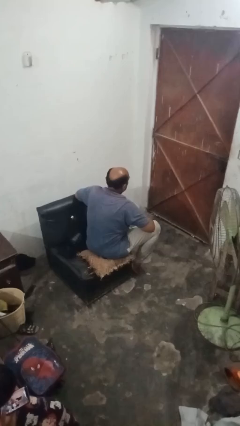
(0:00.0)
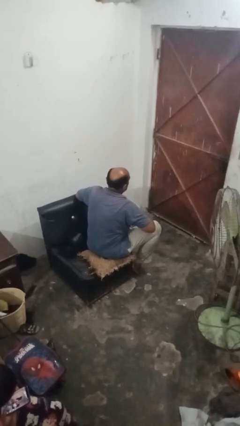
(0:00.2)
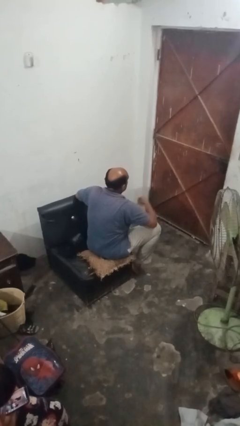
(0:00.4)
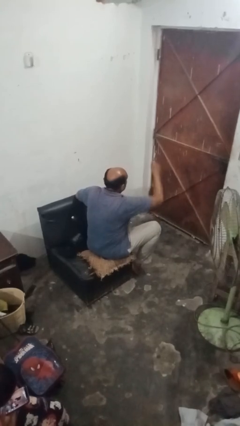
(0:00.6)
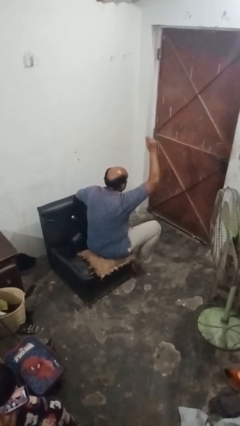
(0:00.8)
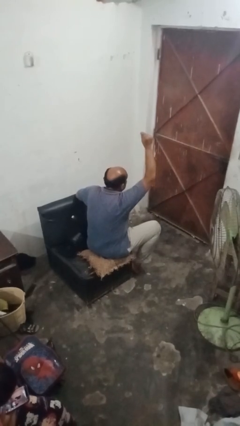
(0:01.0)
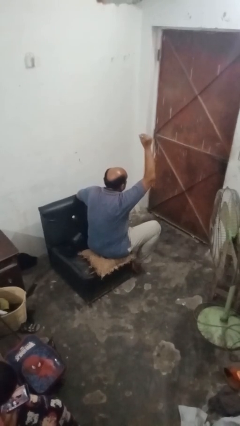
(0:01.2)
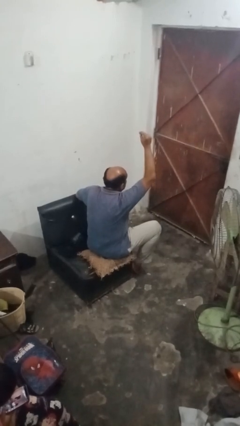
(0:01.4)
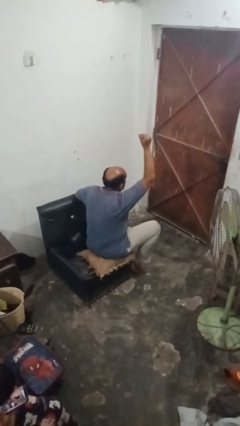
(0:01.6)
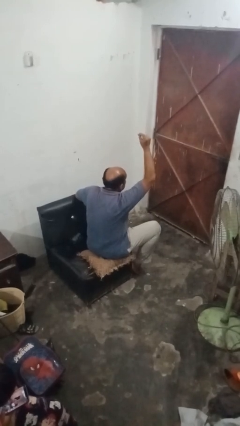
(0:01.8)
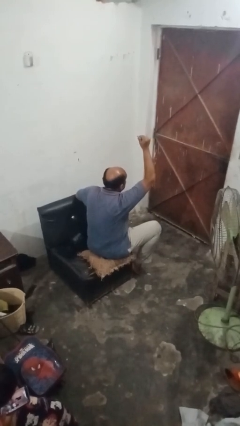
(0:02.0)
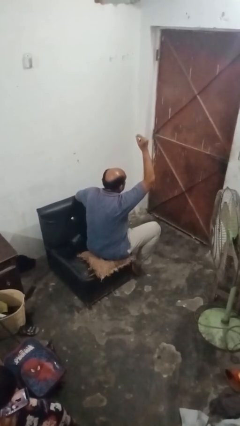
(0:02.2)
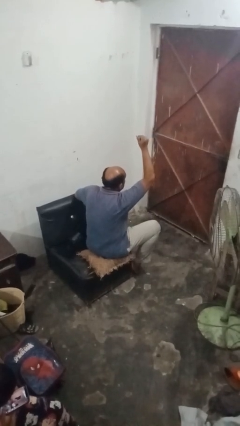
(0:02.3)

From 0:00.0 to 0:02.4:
person snaps fingers

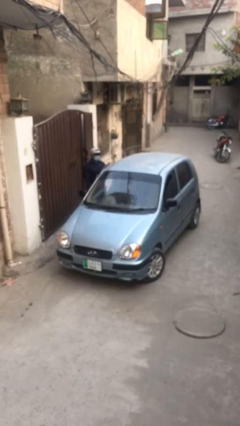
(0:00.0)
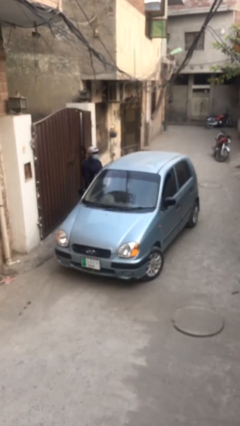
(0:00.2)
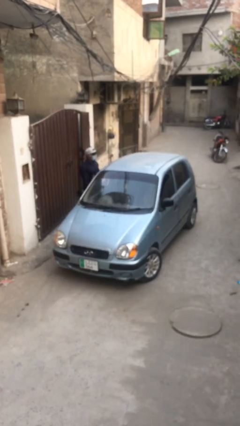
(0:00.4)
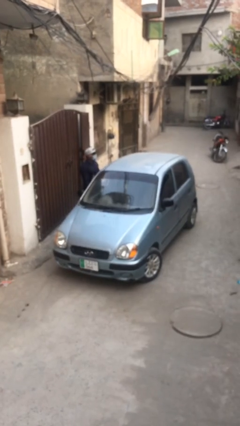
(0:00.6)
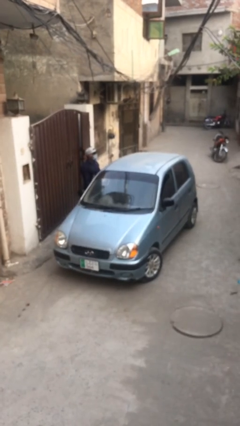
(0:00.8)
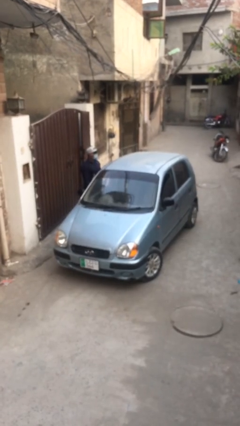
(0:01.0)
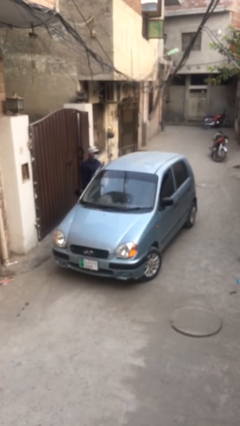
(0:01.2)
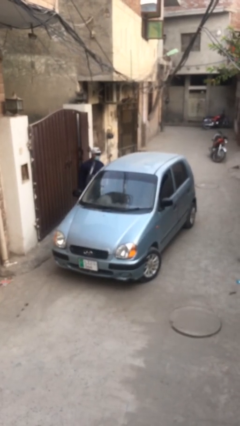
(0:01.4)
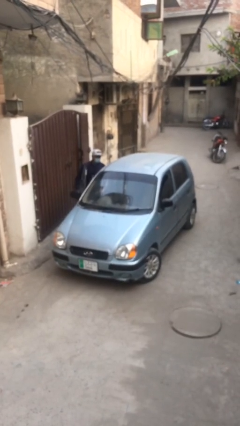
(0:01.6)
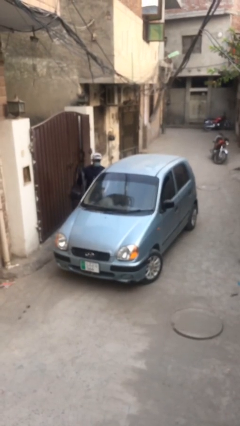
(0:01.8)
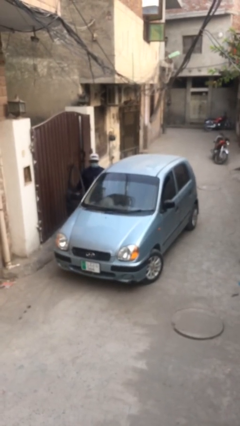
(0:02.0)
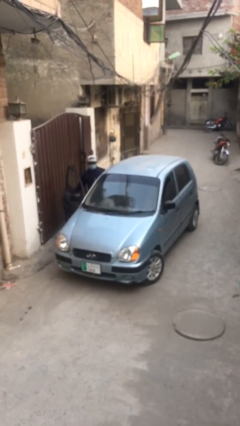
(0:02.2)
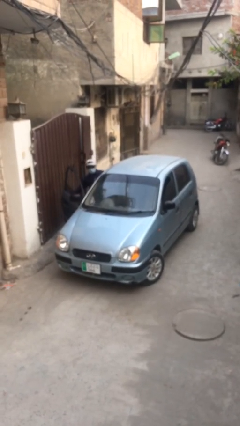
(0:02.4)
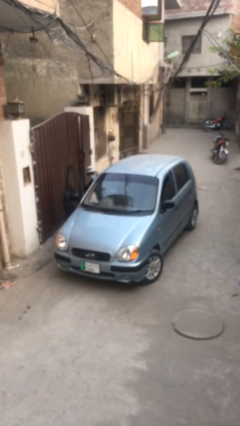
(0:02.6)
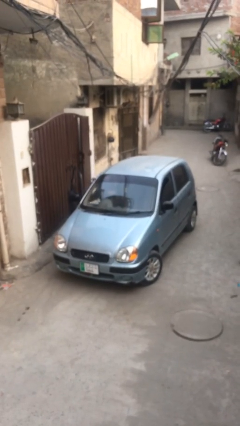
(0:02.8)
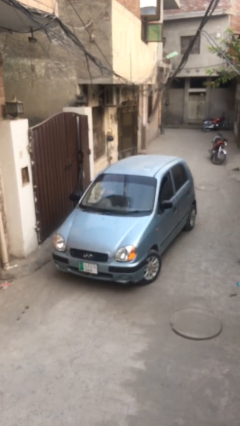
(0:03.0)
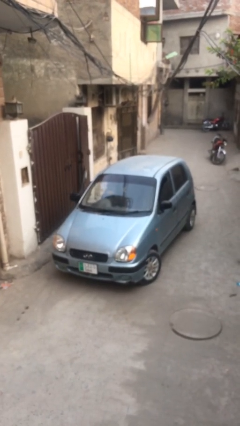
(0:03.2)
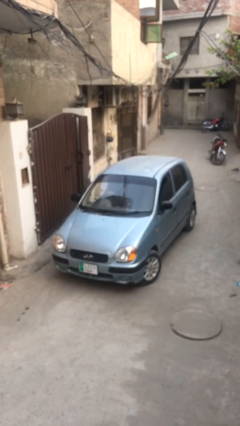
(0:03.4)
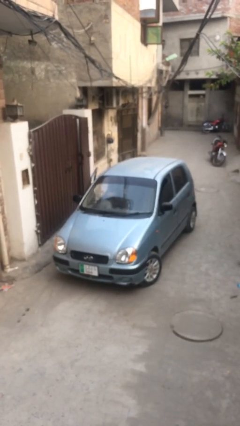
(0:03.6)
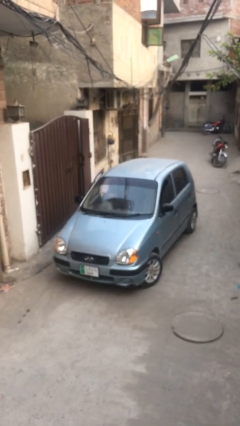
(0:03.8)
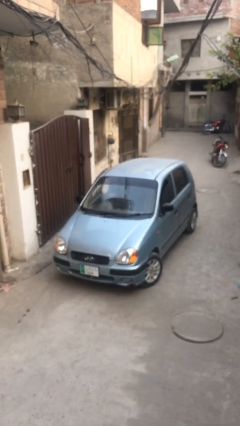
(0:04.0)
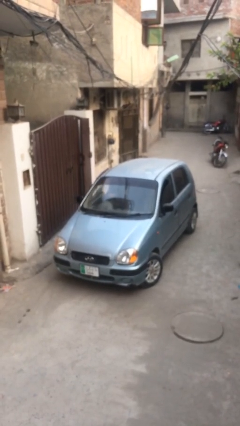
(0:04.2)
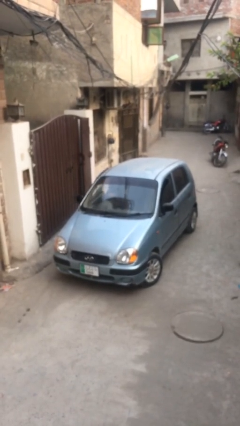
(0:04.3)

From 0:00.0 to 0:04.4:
car picks up person

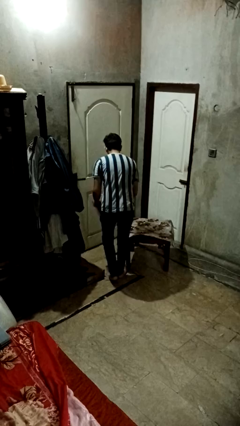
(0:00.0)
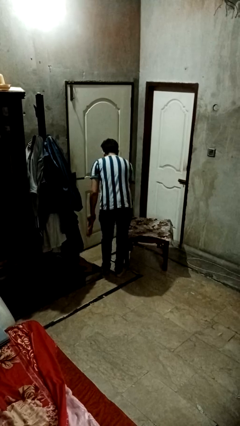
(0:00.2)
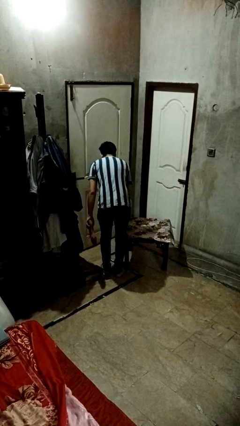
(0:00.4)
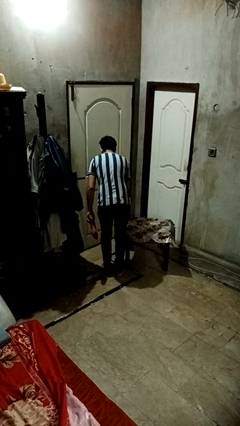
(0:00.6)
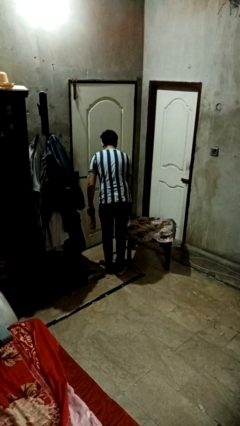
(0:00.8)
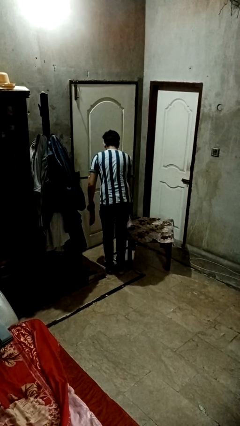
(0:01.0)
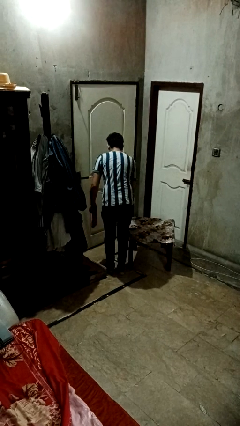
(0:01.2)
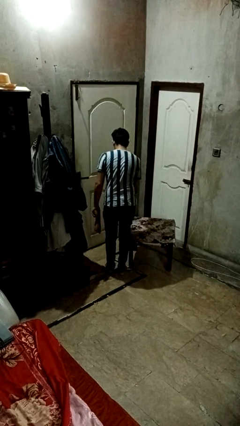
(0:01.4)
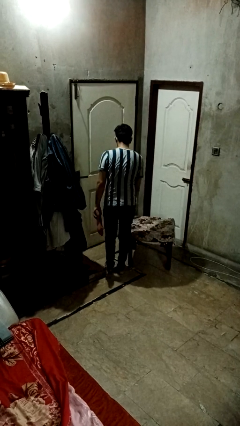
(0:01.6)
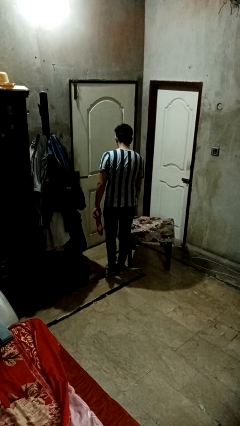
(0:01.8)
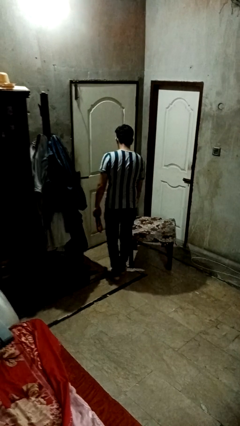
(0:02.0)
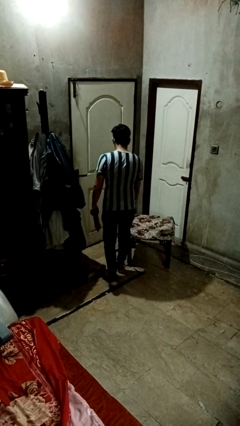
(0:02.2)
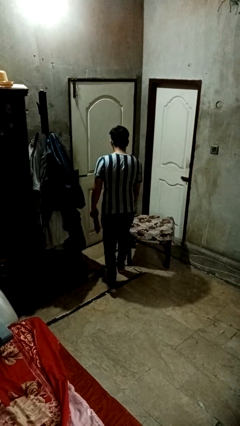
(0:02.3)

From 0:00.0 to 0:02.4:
person bumps into table

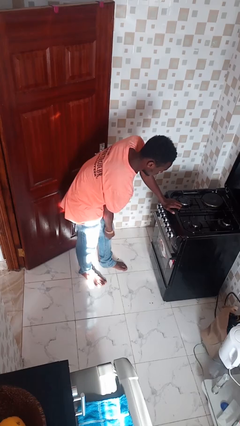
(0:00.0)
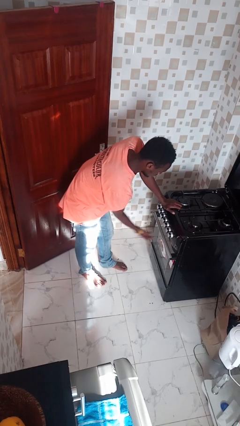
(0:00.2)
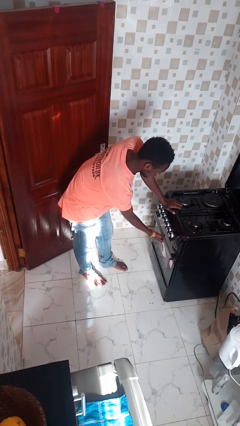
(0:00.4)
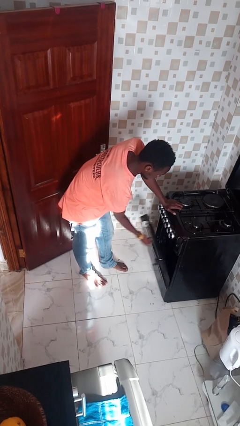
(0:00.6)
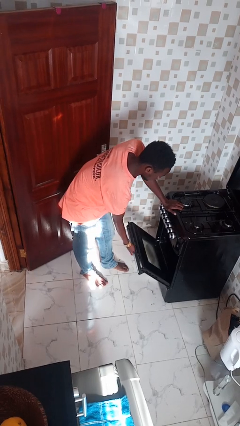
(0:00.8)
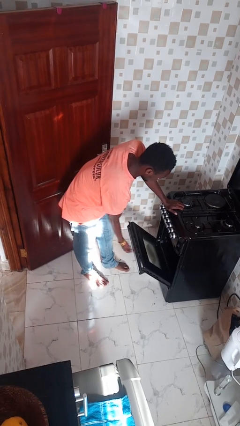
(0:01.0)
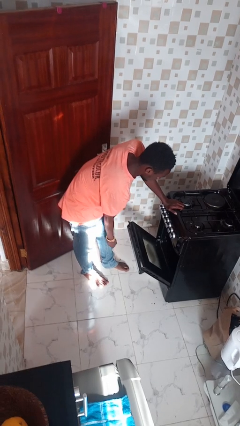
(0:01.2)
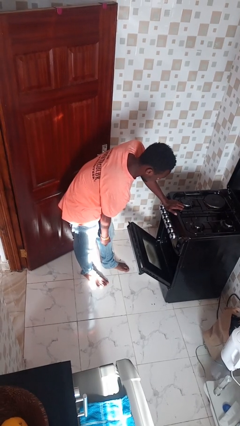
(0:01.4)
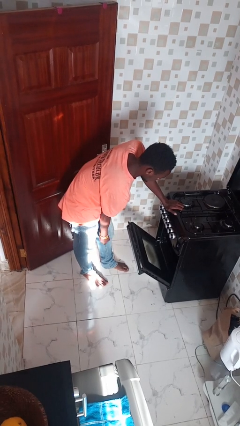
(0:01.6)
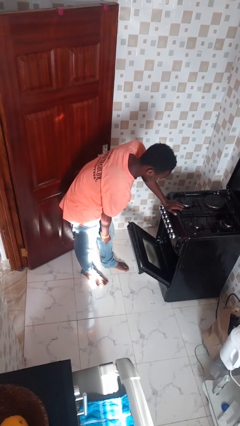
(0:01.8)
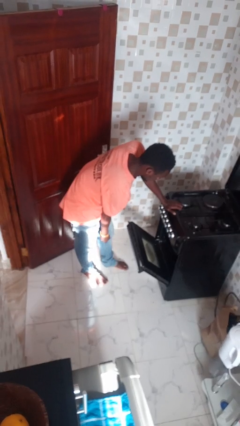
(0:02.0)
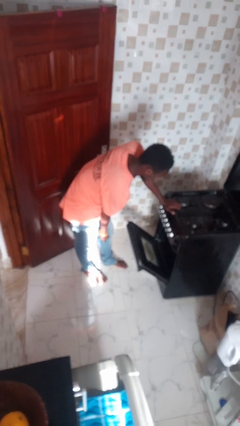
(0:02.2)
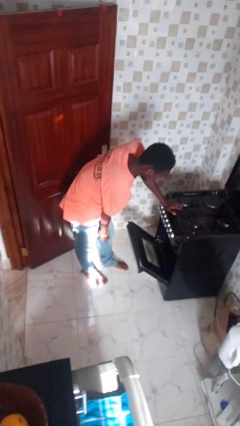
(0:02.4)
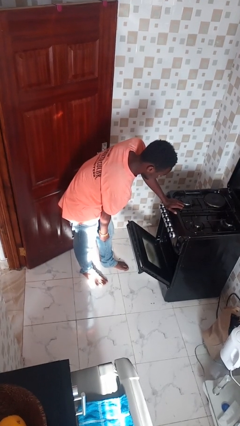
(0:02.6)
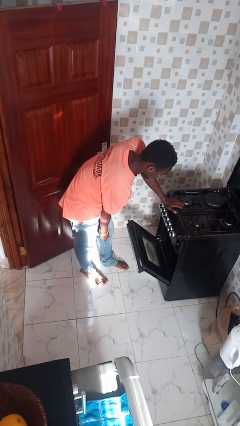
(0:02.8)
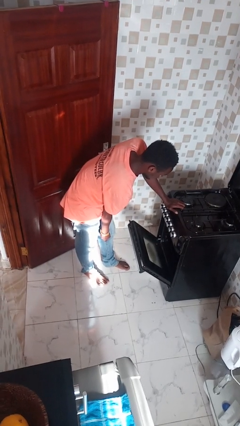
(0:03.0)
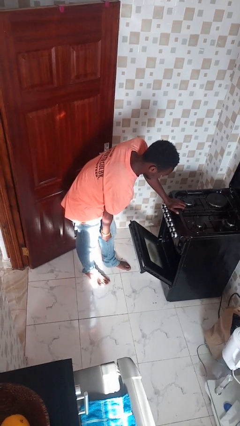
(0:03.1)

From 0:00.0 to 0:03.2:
person opens oven door

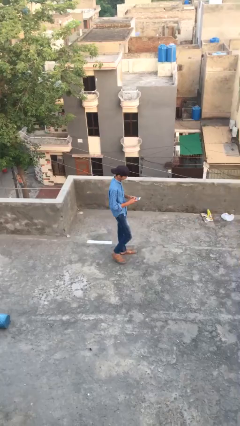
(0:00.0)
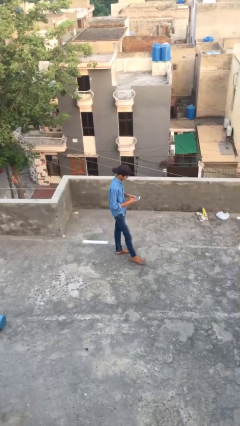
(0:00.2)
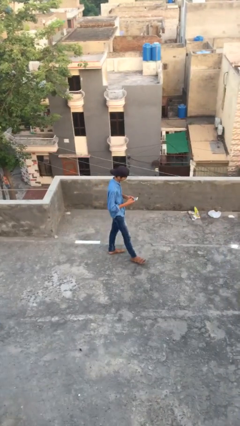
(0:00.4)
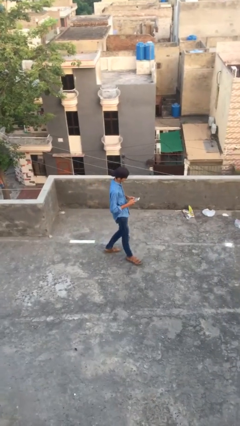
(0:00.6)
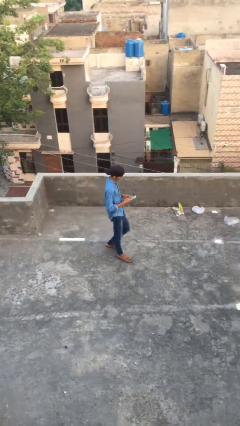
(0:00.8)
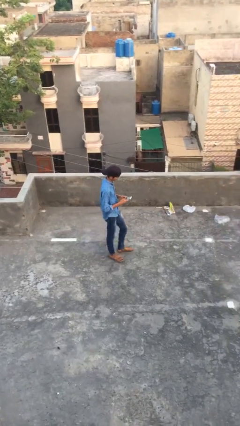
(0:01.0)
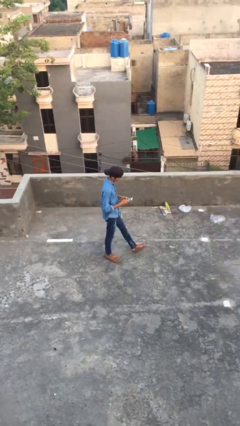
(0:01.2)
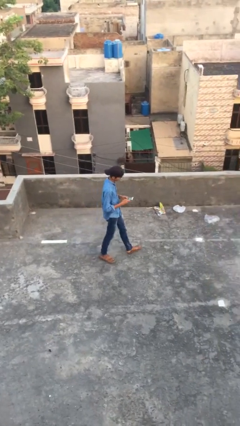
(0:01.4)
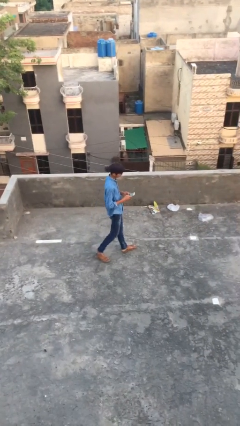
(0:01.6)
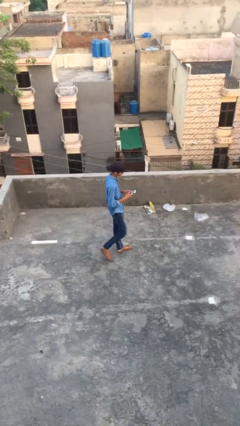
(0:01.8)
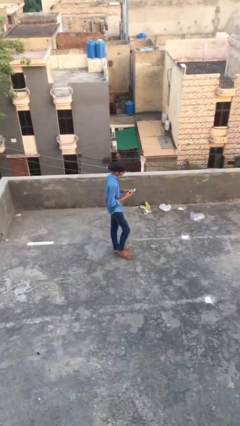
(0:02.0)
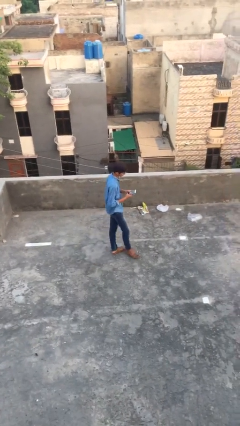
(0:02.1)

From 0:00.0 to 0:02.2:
person texts on phone

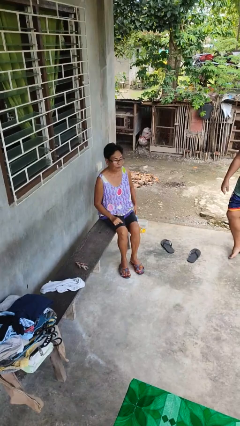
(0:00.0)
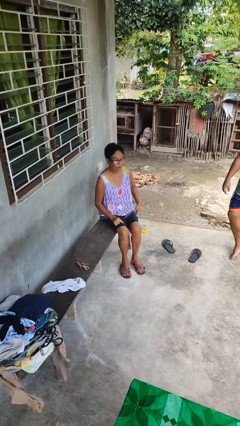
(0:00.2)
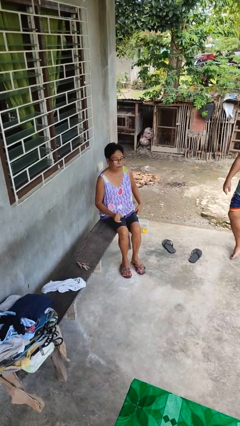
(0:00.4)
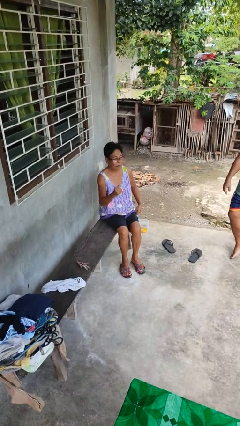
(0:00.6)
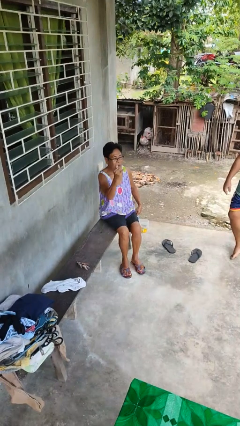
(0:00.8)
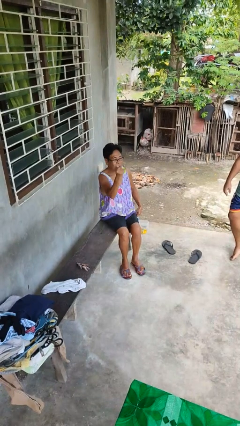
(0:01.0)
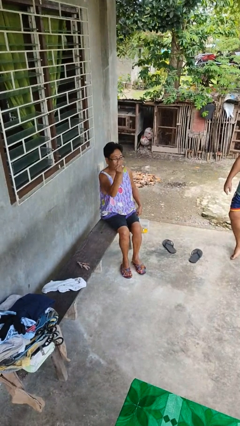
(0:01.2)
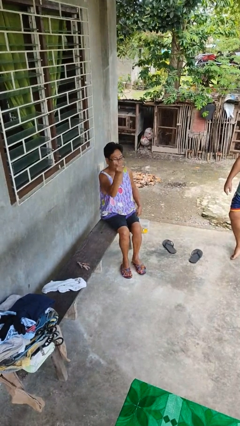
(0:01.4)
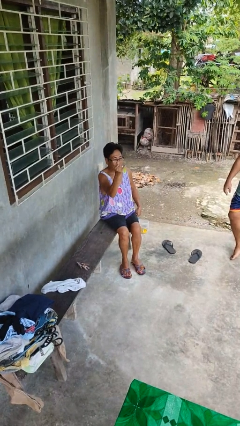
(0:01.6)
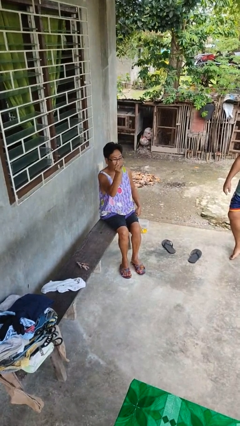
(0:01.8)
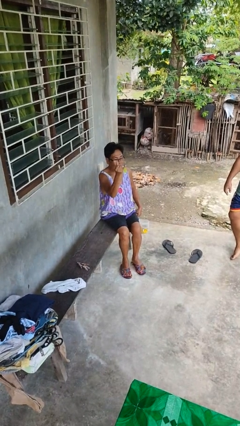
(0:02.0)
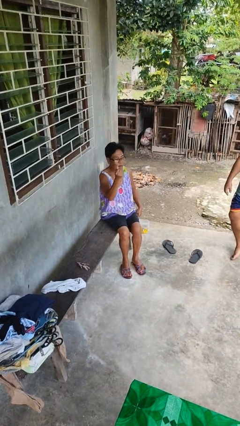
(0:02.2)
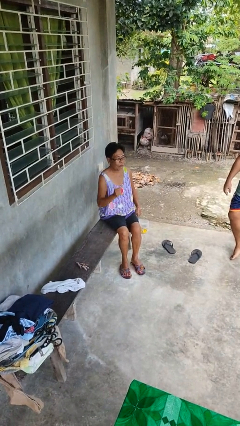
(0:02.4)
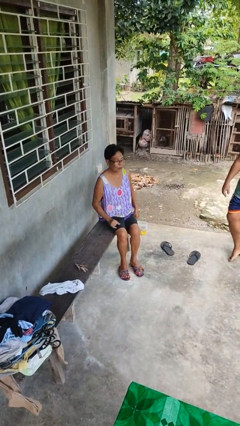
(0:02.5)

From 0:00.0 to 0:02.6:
person gestures hang loose

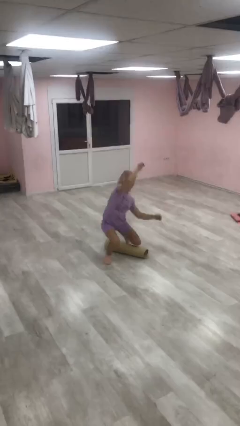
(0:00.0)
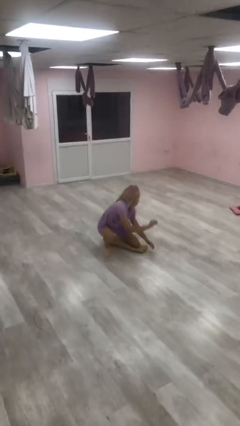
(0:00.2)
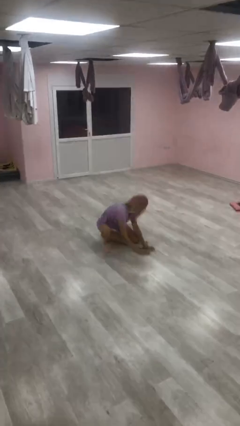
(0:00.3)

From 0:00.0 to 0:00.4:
person trips on object on floor
